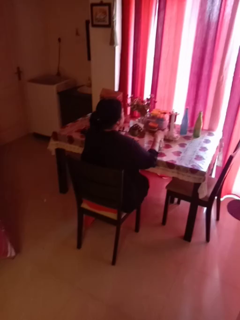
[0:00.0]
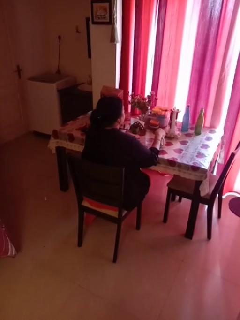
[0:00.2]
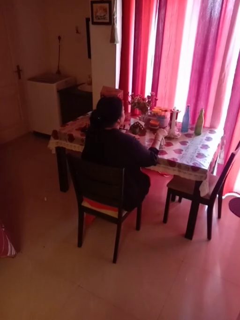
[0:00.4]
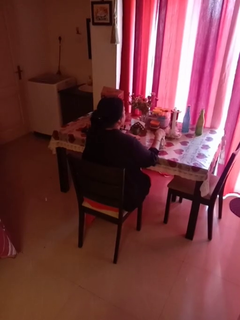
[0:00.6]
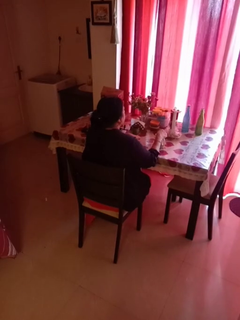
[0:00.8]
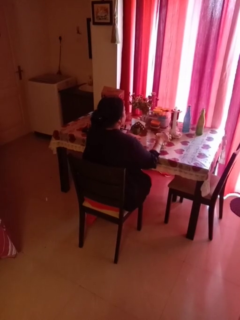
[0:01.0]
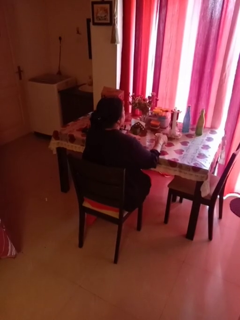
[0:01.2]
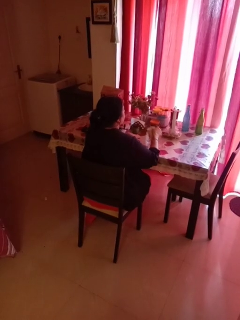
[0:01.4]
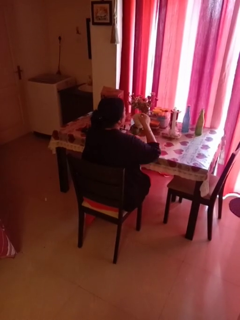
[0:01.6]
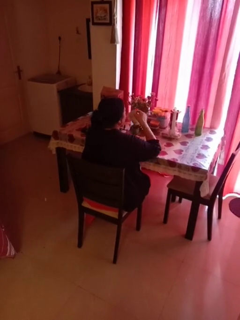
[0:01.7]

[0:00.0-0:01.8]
person stirs mug

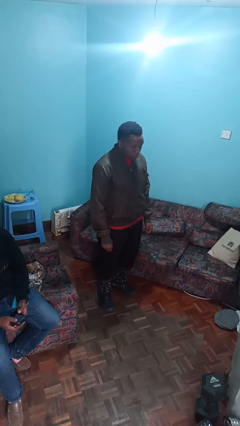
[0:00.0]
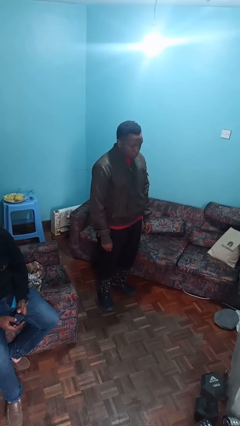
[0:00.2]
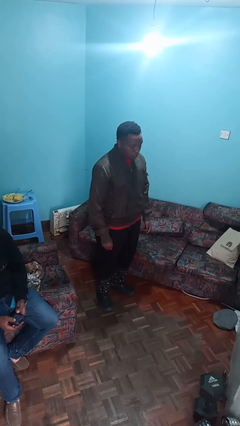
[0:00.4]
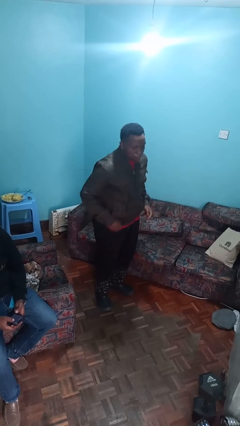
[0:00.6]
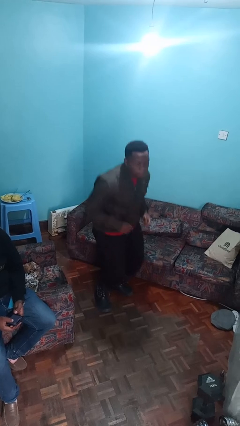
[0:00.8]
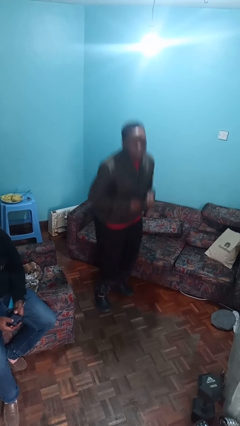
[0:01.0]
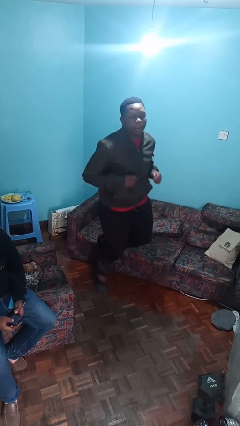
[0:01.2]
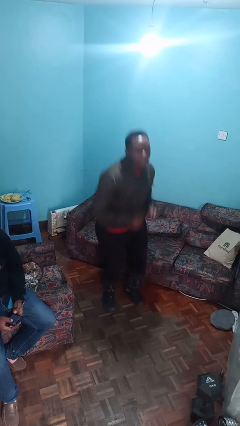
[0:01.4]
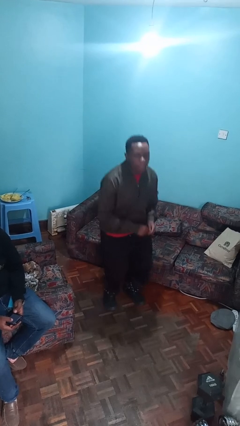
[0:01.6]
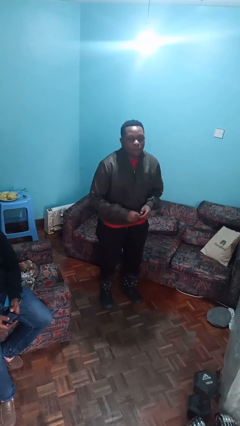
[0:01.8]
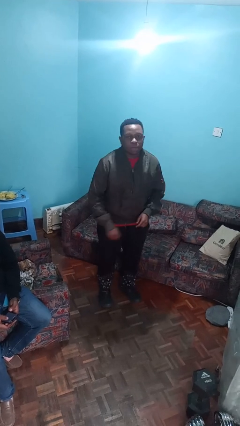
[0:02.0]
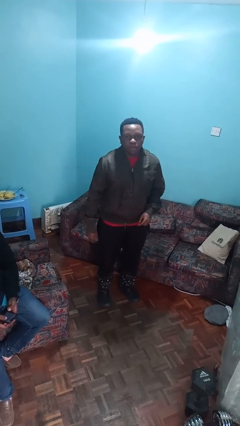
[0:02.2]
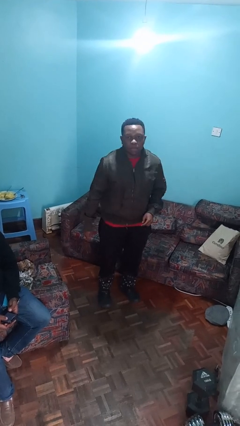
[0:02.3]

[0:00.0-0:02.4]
person jumps

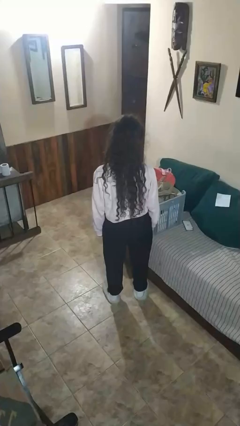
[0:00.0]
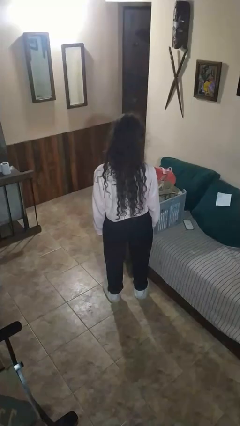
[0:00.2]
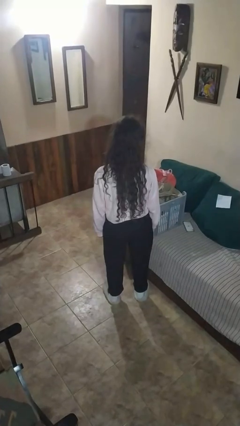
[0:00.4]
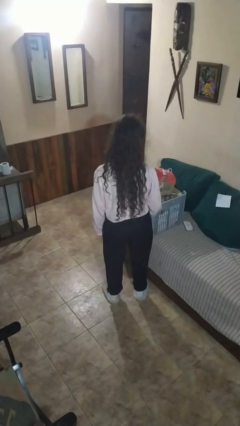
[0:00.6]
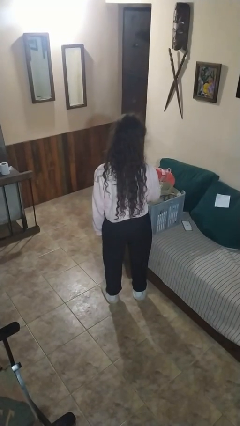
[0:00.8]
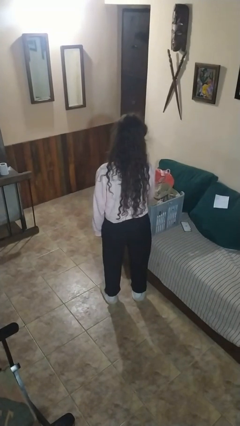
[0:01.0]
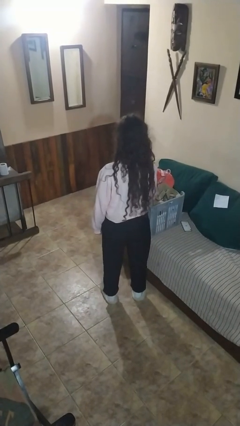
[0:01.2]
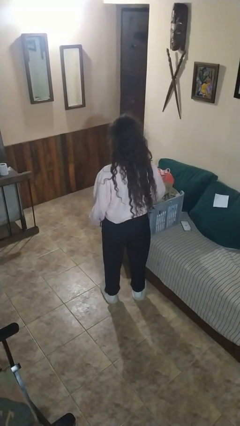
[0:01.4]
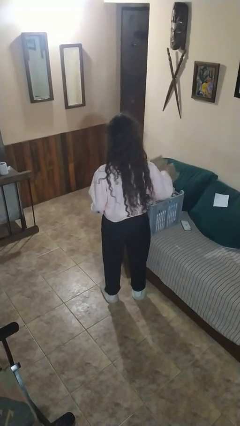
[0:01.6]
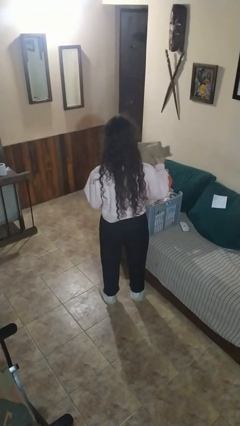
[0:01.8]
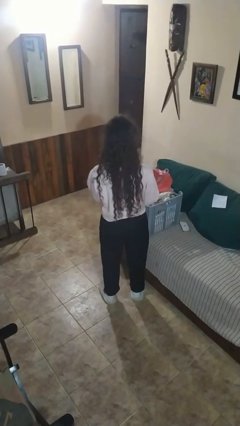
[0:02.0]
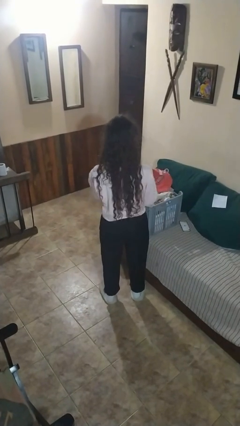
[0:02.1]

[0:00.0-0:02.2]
person takes object from basket

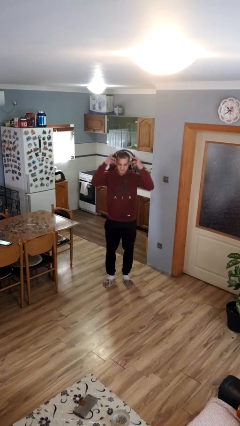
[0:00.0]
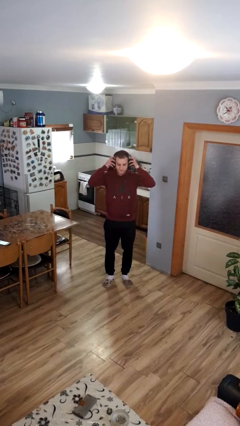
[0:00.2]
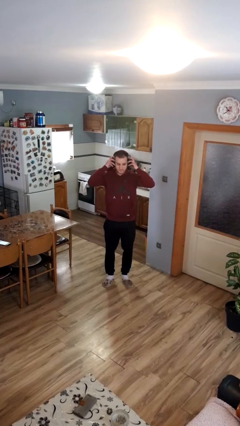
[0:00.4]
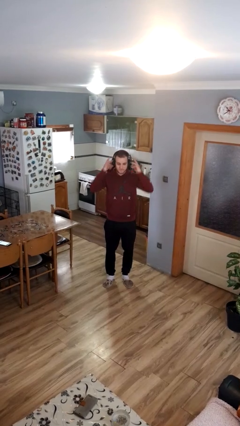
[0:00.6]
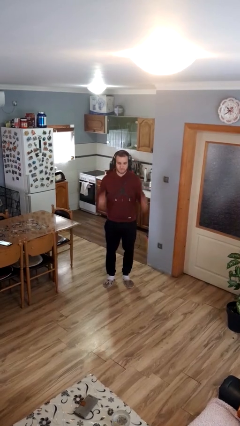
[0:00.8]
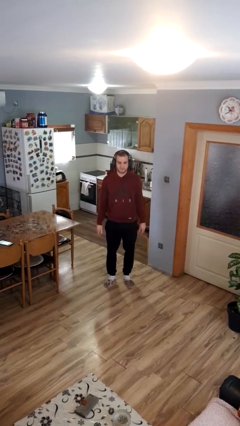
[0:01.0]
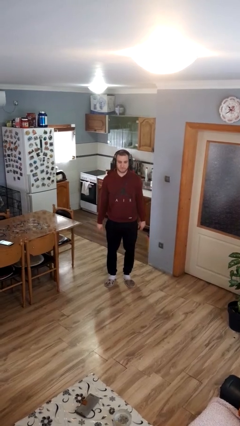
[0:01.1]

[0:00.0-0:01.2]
person puts on headphones

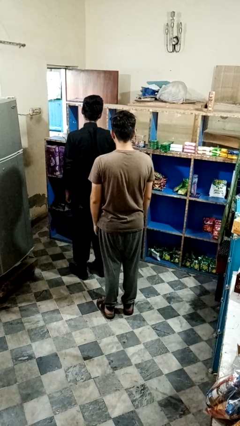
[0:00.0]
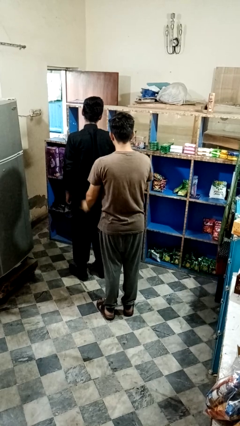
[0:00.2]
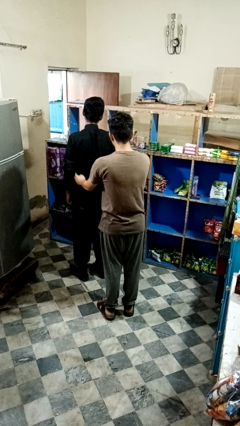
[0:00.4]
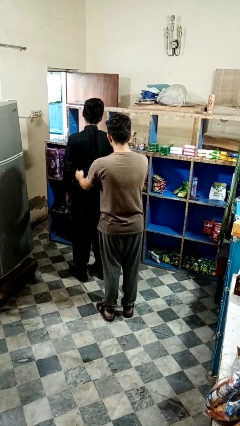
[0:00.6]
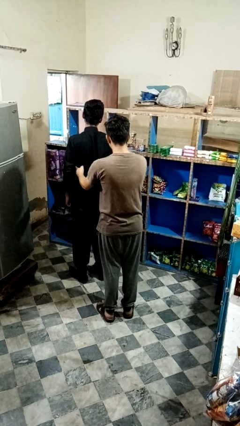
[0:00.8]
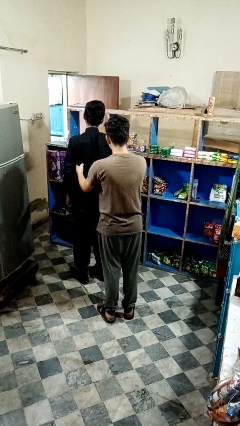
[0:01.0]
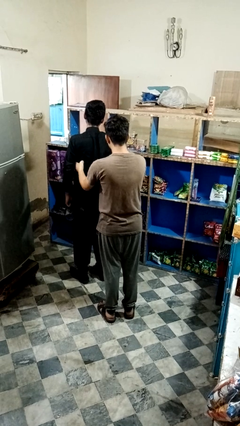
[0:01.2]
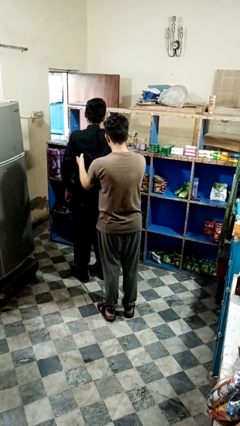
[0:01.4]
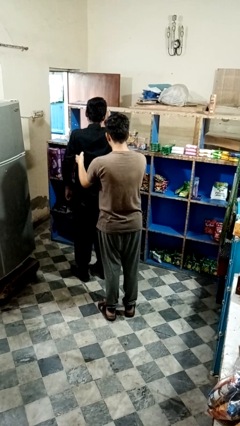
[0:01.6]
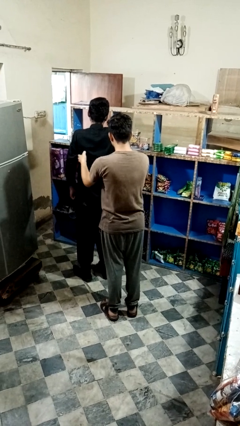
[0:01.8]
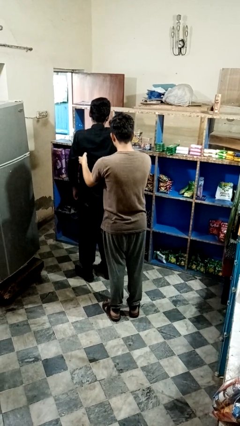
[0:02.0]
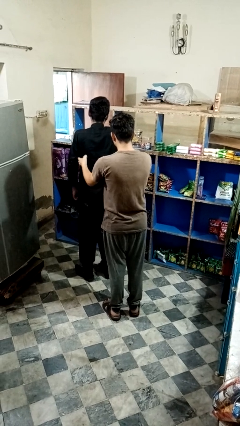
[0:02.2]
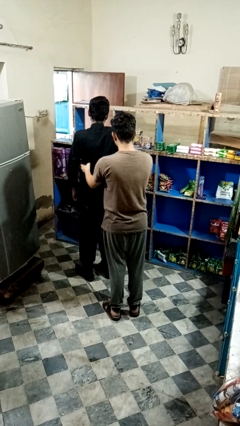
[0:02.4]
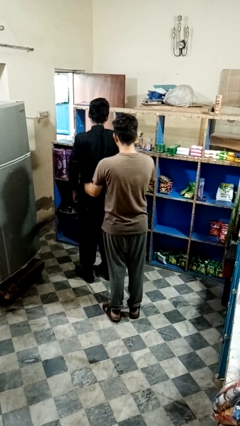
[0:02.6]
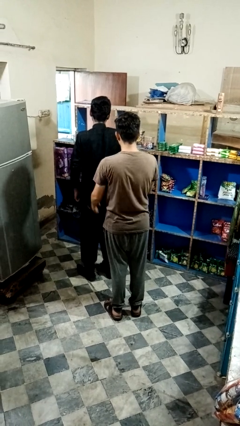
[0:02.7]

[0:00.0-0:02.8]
person tickles person

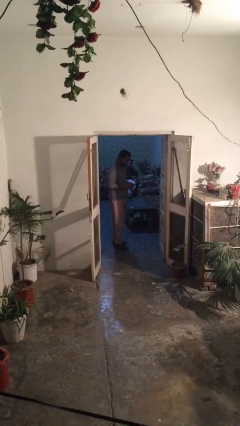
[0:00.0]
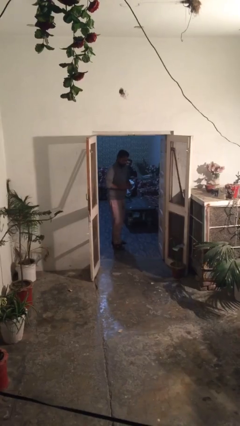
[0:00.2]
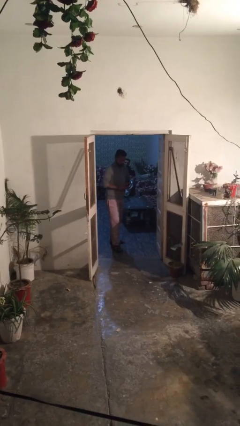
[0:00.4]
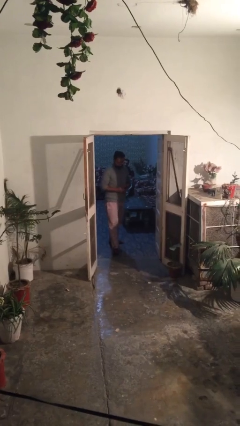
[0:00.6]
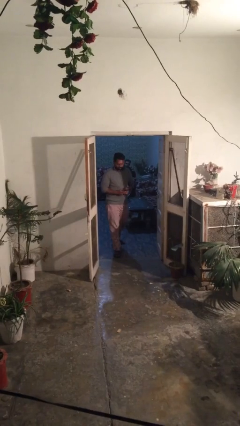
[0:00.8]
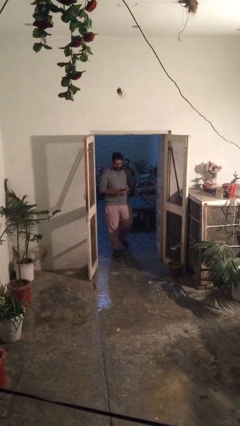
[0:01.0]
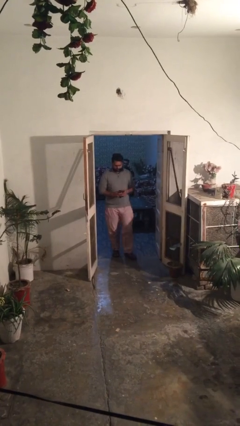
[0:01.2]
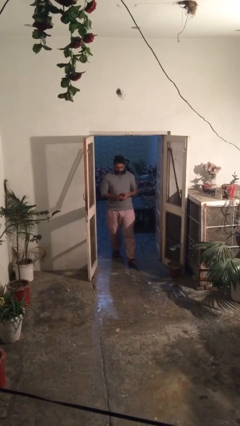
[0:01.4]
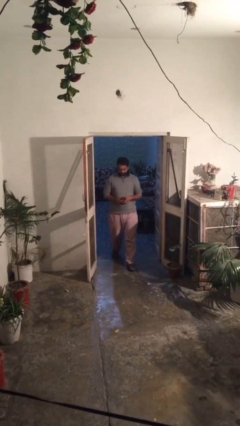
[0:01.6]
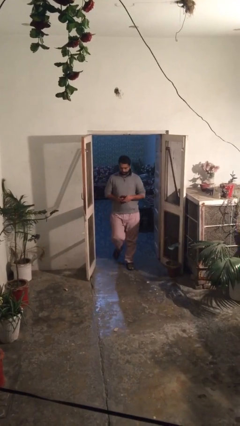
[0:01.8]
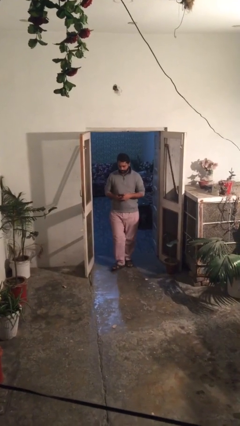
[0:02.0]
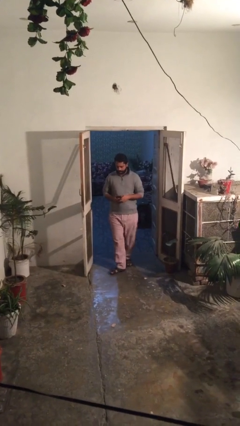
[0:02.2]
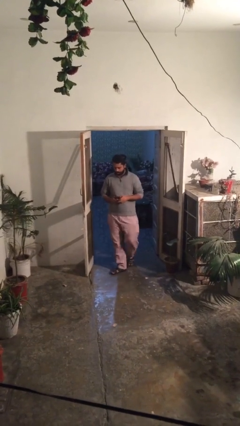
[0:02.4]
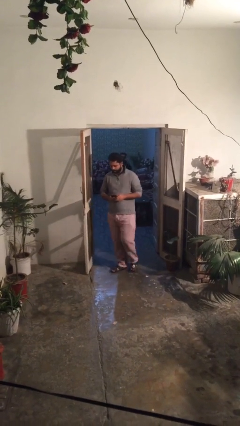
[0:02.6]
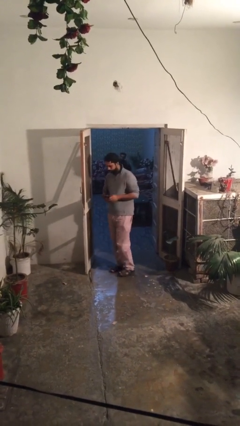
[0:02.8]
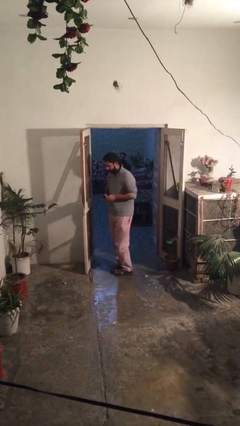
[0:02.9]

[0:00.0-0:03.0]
person enters scene through structure

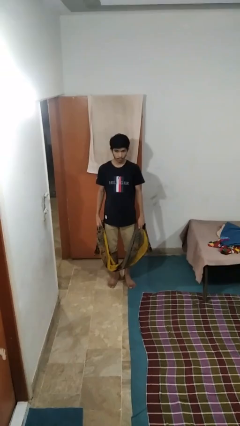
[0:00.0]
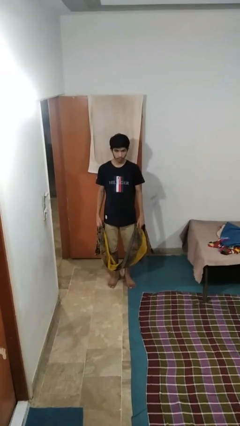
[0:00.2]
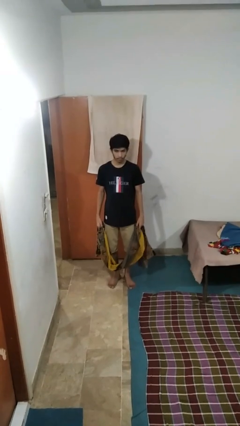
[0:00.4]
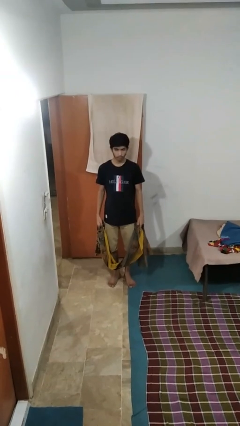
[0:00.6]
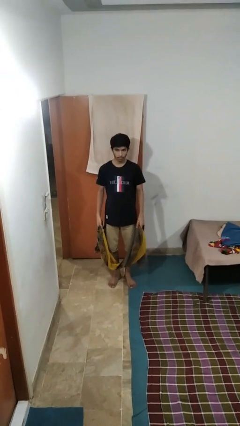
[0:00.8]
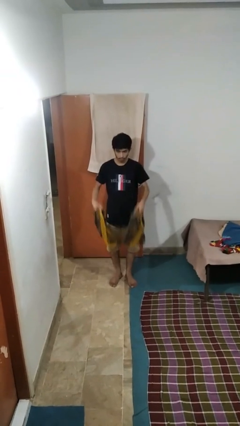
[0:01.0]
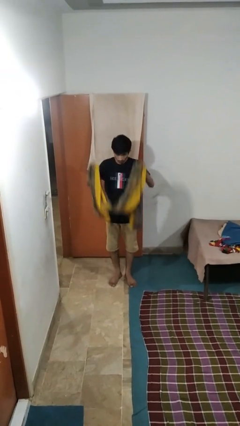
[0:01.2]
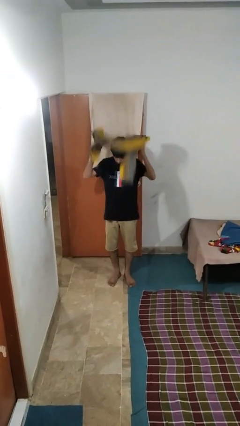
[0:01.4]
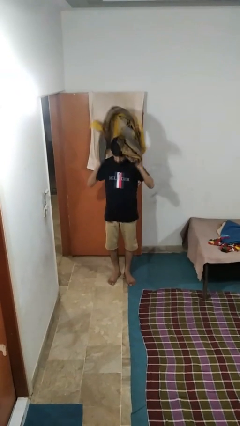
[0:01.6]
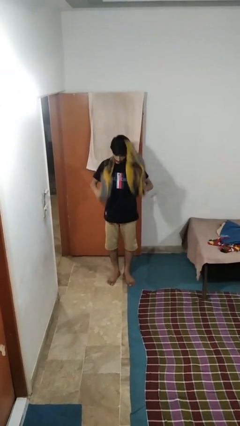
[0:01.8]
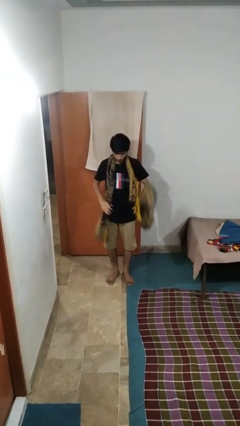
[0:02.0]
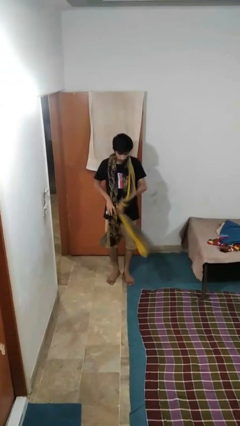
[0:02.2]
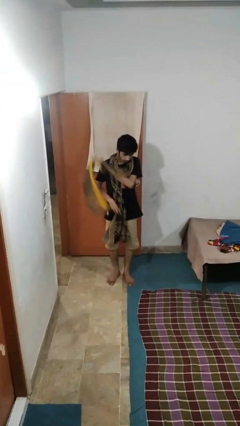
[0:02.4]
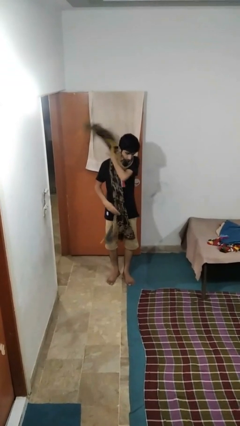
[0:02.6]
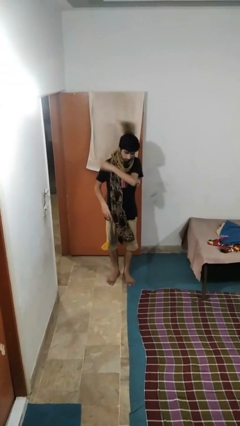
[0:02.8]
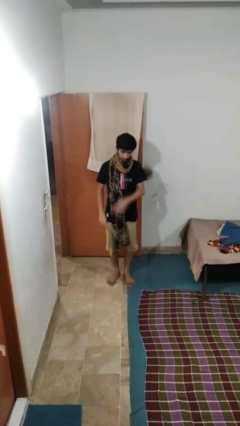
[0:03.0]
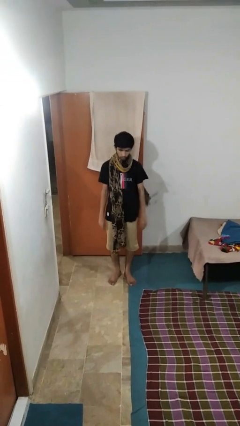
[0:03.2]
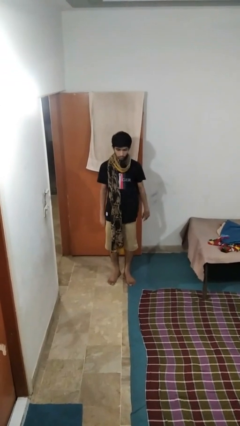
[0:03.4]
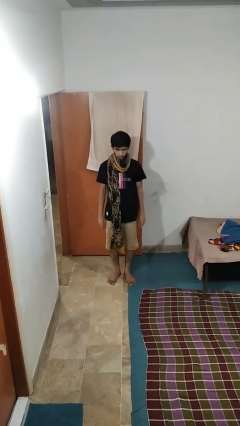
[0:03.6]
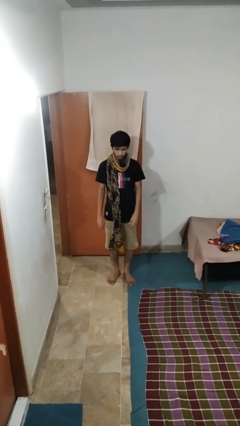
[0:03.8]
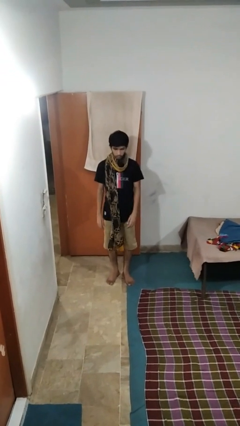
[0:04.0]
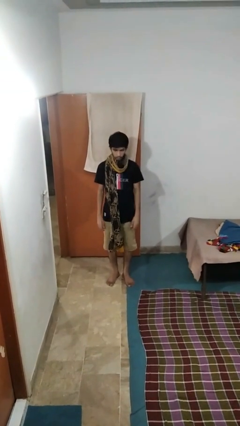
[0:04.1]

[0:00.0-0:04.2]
person puts on scarf
